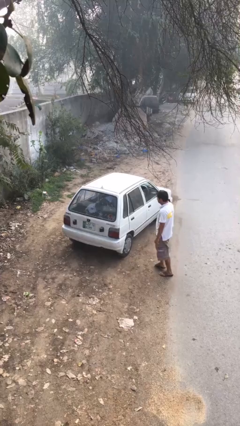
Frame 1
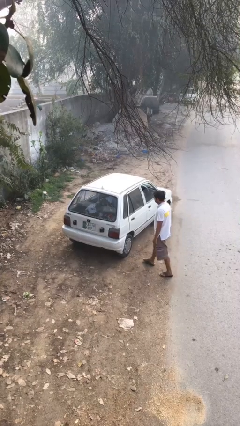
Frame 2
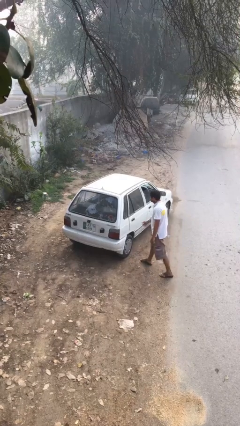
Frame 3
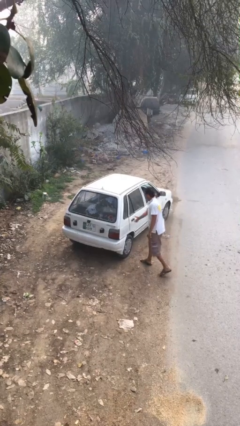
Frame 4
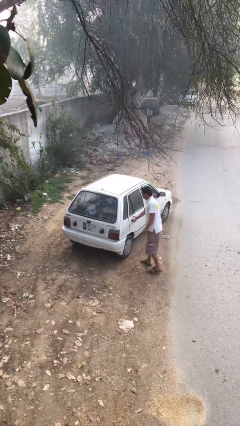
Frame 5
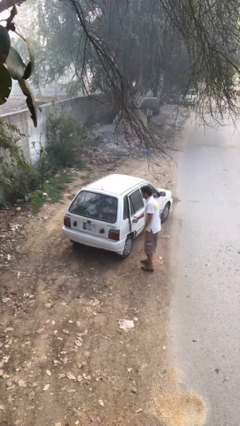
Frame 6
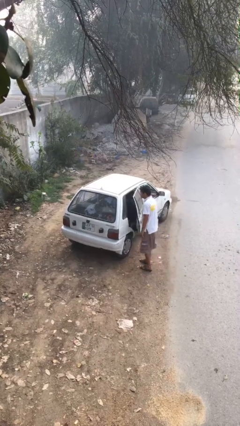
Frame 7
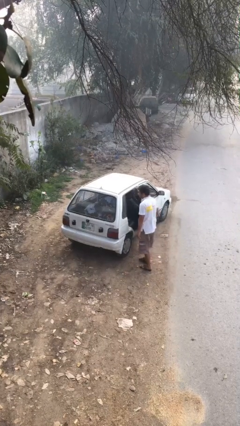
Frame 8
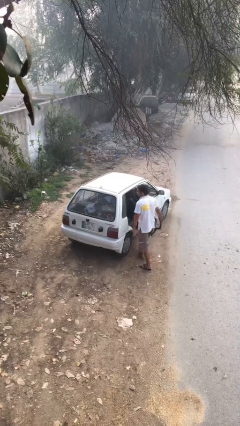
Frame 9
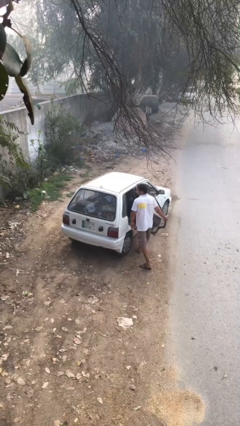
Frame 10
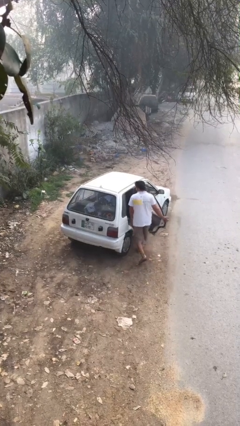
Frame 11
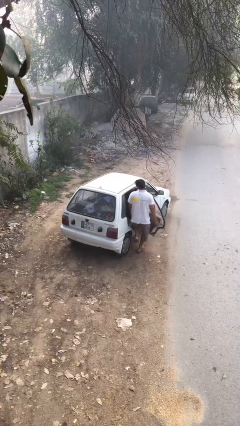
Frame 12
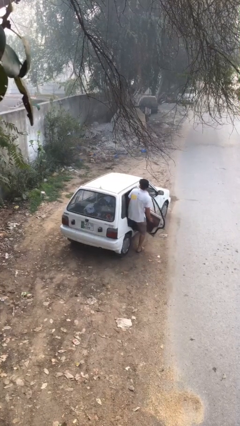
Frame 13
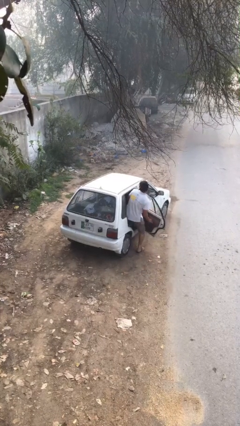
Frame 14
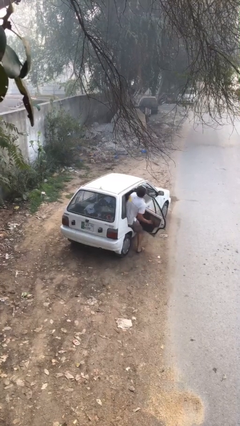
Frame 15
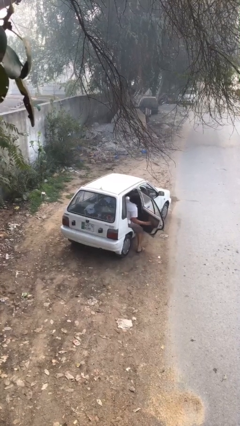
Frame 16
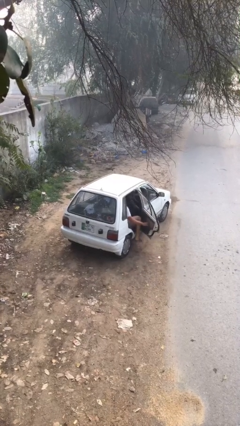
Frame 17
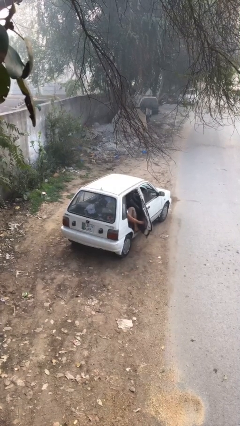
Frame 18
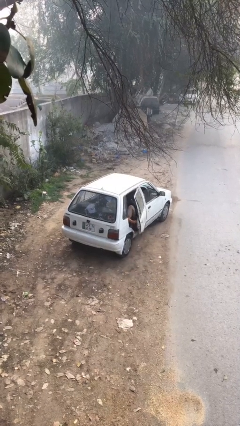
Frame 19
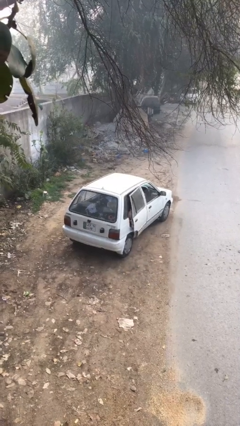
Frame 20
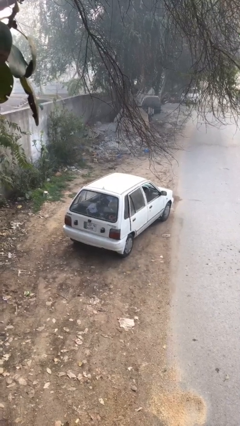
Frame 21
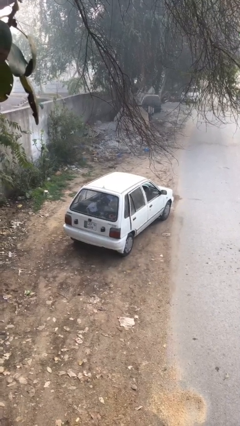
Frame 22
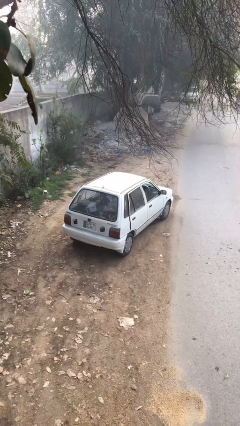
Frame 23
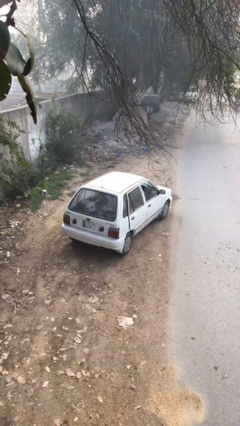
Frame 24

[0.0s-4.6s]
car picks up person

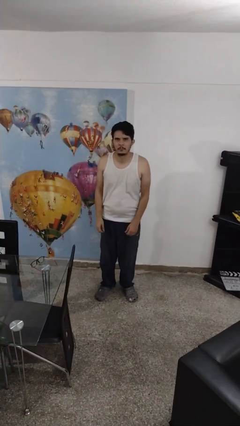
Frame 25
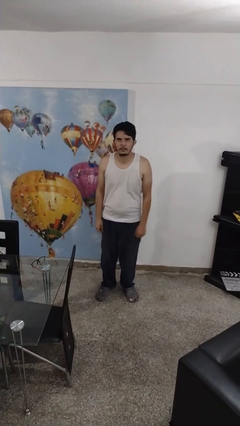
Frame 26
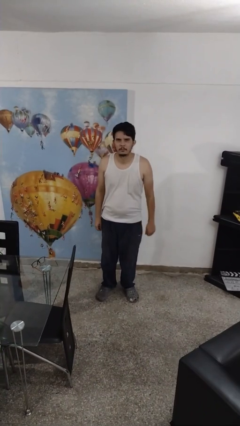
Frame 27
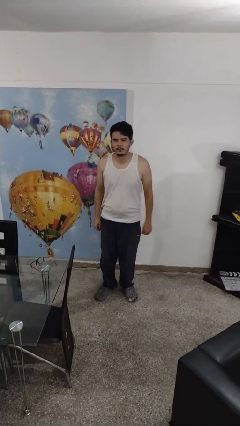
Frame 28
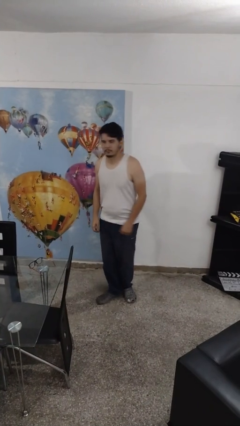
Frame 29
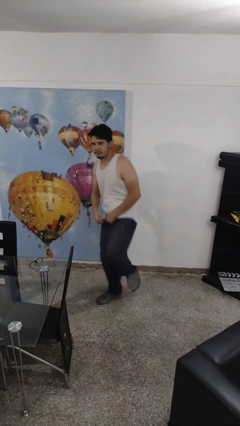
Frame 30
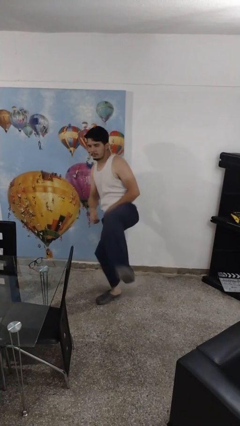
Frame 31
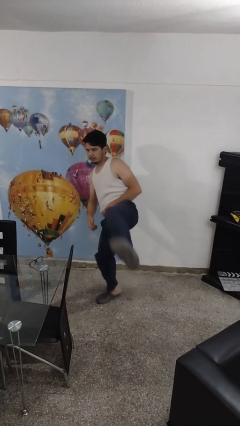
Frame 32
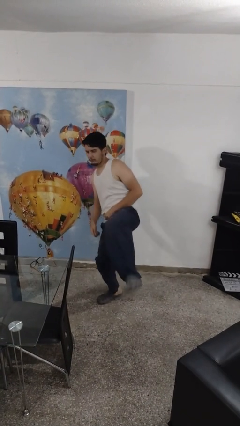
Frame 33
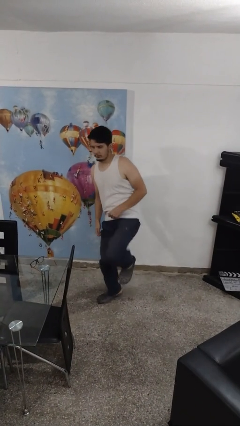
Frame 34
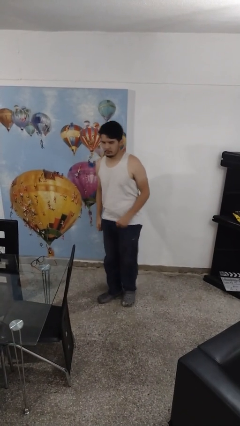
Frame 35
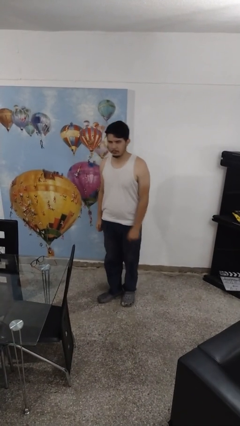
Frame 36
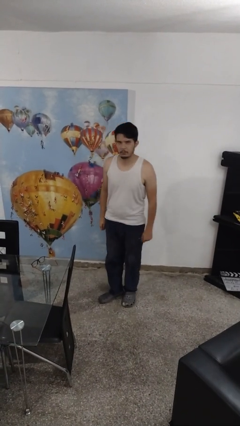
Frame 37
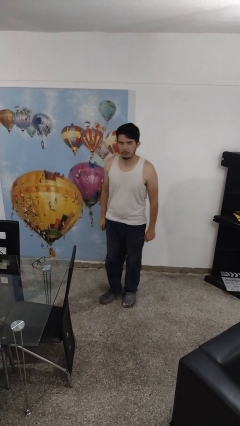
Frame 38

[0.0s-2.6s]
person karate kicks

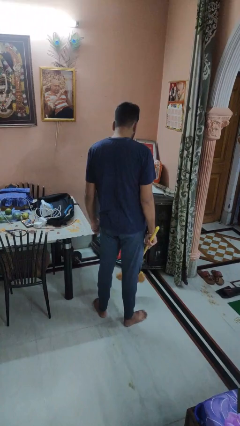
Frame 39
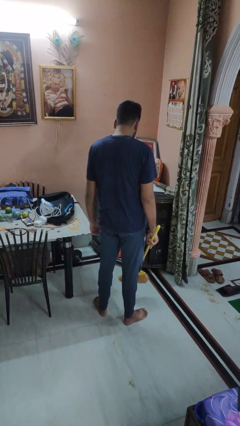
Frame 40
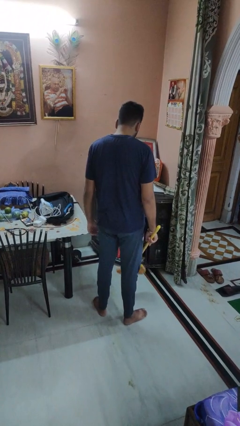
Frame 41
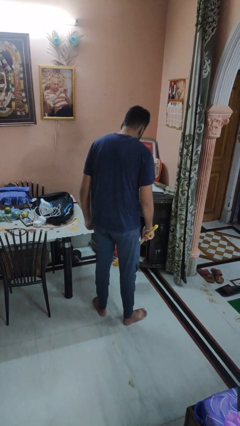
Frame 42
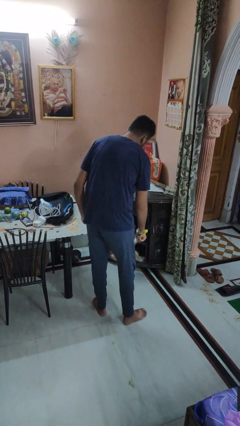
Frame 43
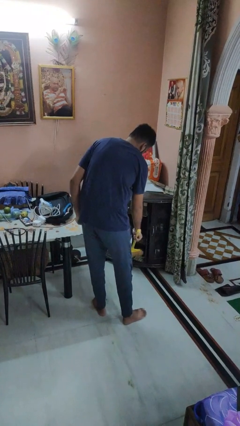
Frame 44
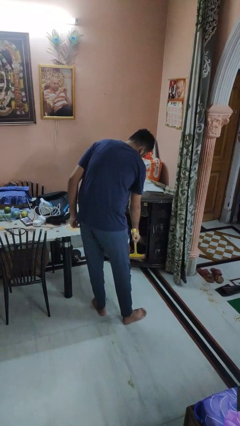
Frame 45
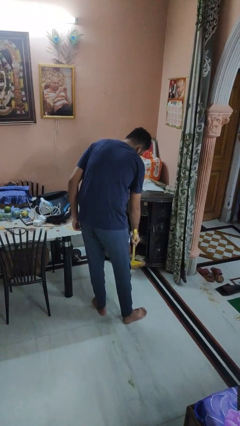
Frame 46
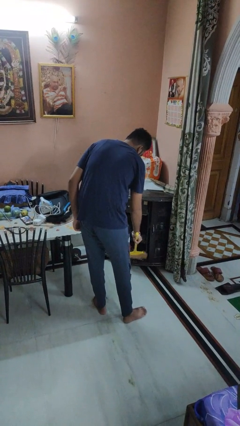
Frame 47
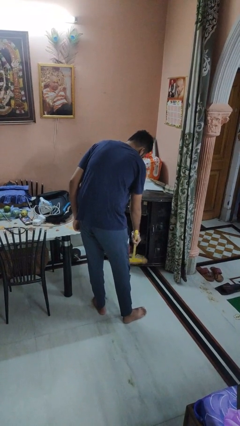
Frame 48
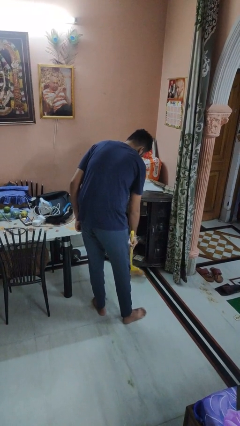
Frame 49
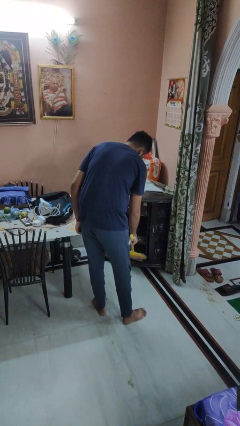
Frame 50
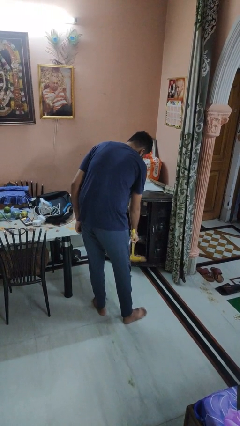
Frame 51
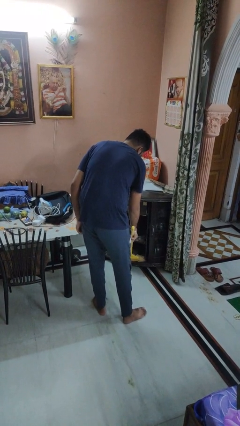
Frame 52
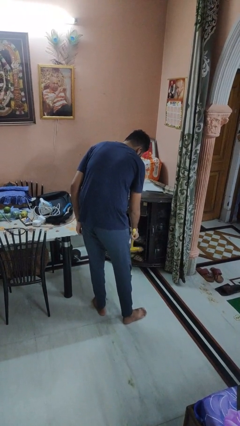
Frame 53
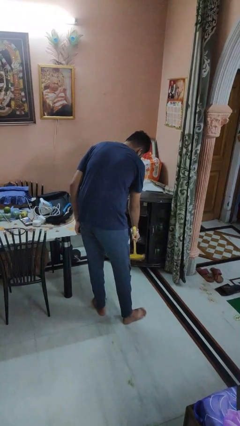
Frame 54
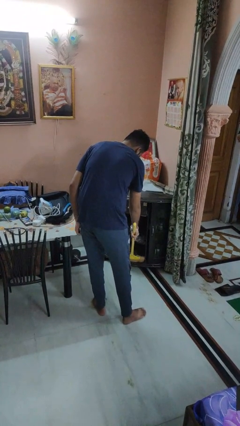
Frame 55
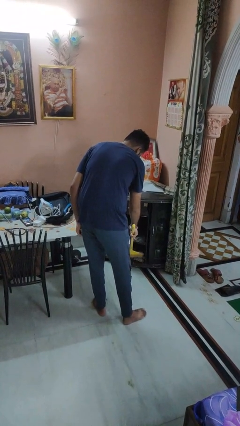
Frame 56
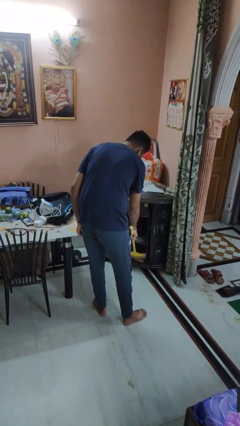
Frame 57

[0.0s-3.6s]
person dusts furniture

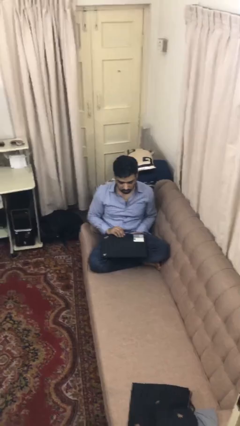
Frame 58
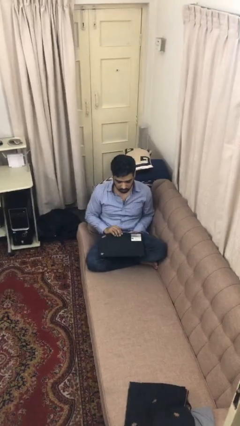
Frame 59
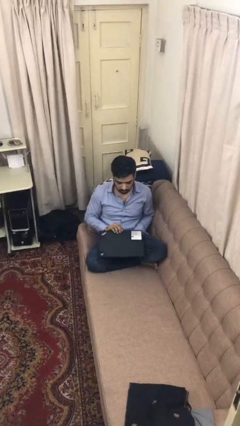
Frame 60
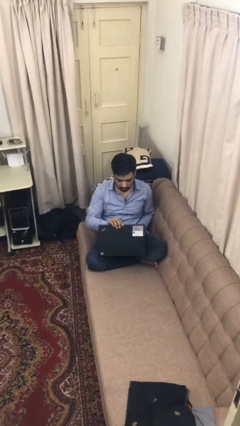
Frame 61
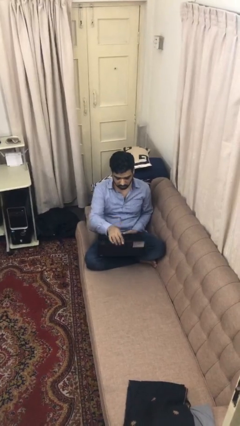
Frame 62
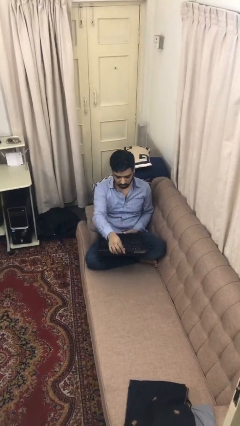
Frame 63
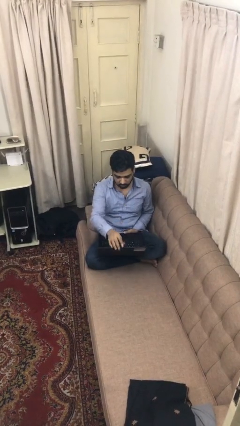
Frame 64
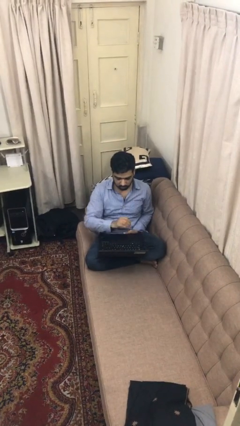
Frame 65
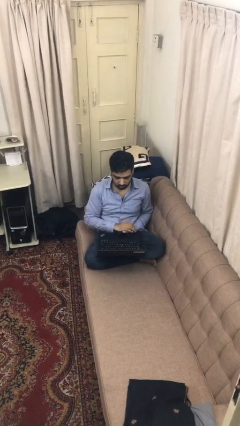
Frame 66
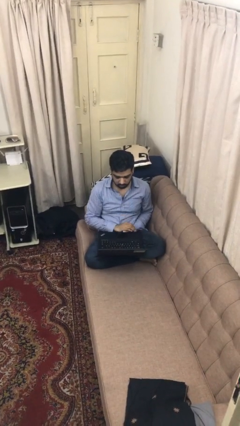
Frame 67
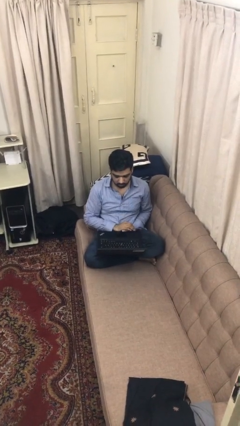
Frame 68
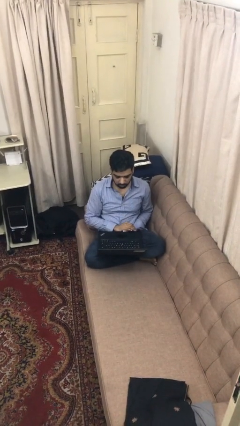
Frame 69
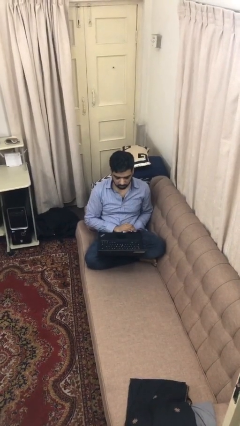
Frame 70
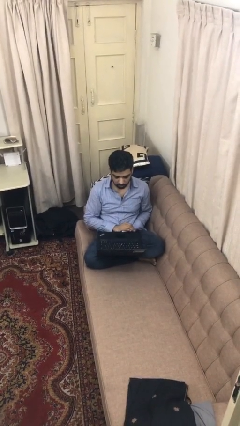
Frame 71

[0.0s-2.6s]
person opens laptop

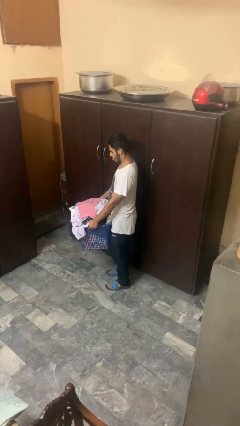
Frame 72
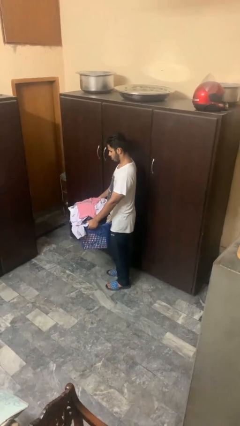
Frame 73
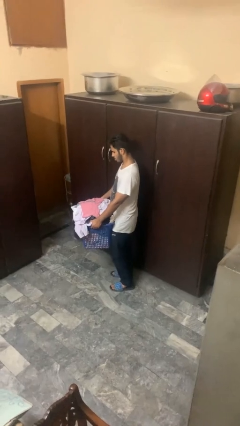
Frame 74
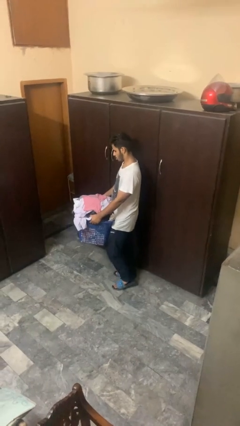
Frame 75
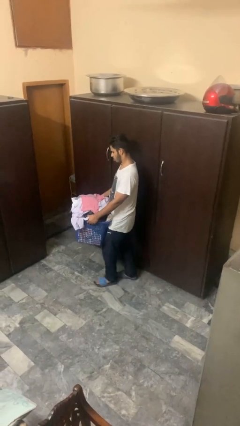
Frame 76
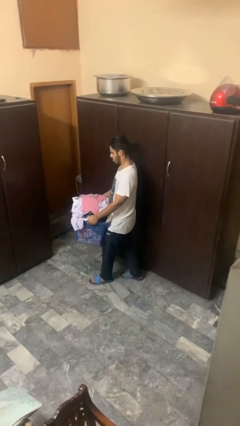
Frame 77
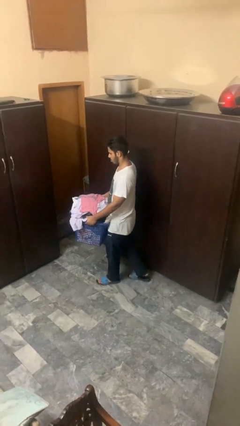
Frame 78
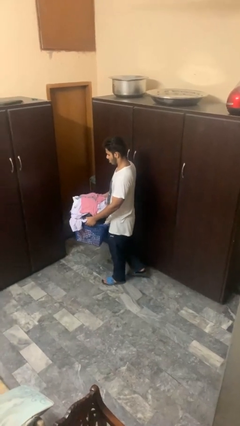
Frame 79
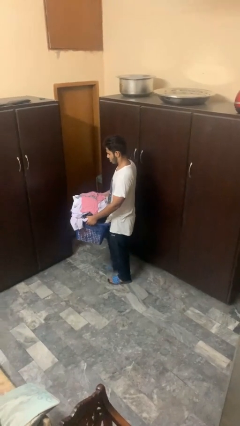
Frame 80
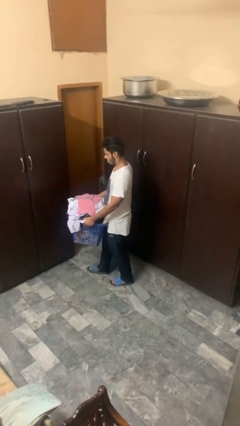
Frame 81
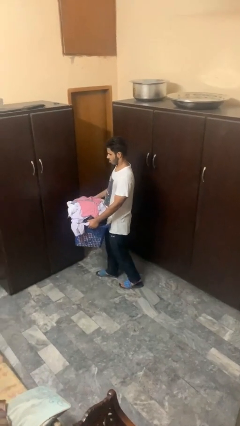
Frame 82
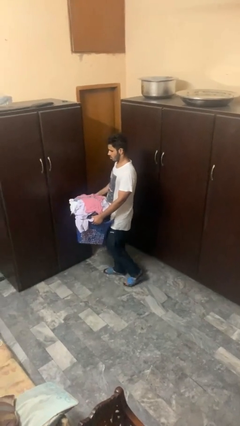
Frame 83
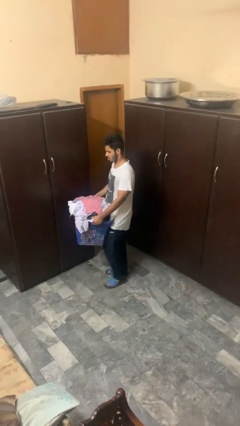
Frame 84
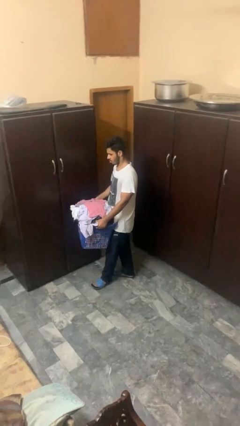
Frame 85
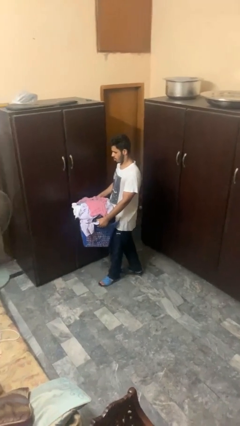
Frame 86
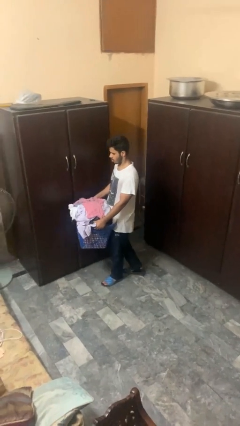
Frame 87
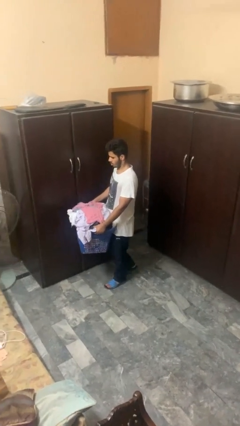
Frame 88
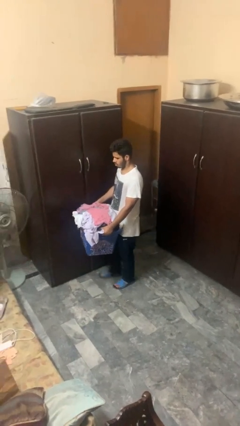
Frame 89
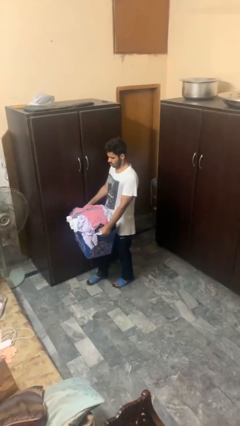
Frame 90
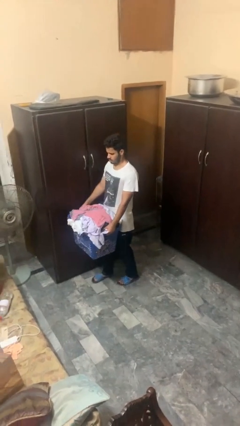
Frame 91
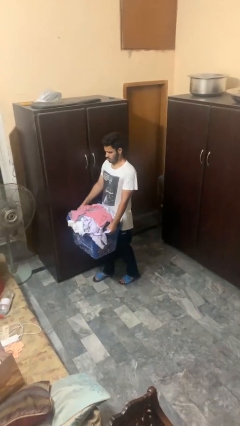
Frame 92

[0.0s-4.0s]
person carries laundry basket
